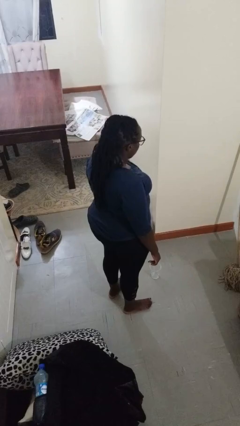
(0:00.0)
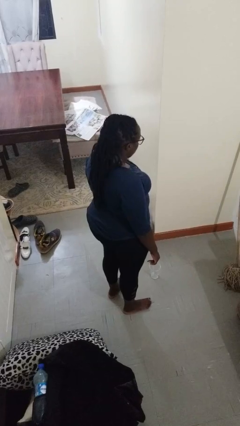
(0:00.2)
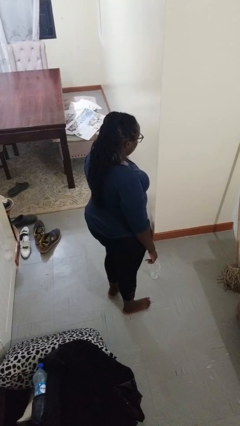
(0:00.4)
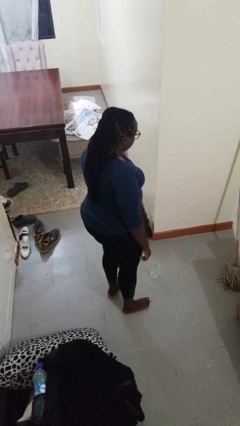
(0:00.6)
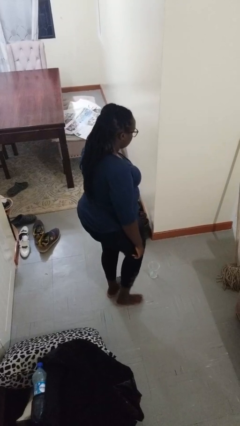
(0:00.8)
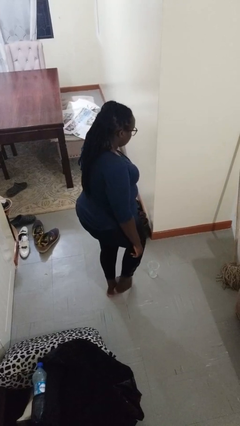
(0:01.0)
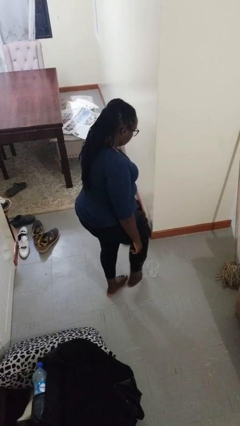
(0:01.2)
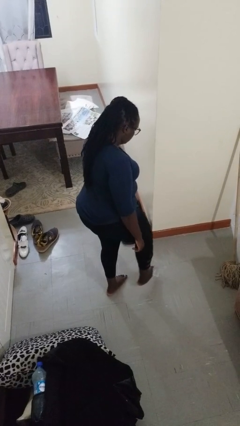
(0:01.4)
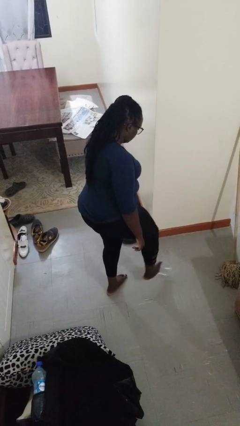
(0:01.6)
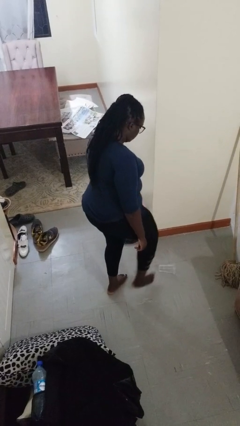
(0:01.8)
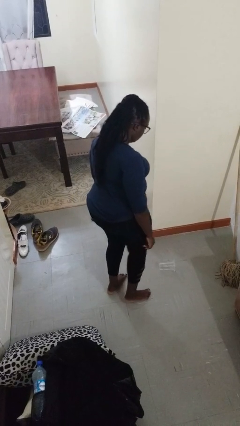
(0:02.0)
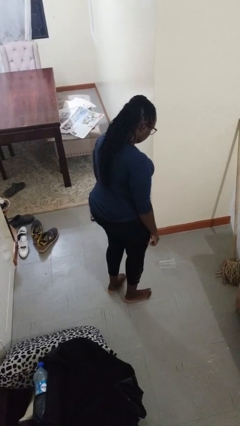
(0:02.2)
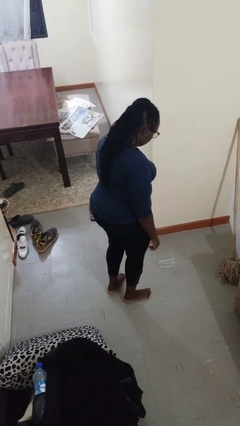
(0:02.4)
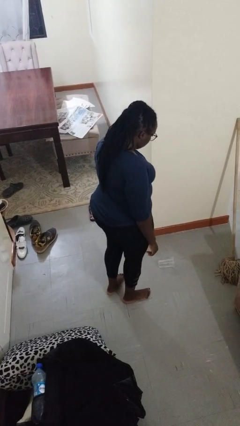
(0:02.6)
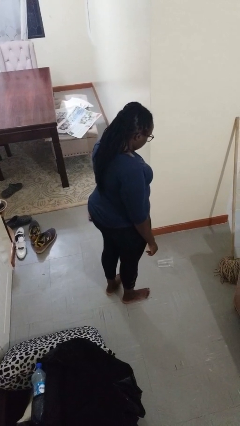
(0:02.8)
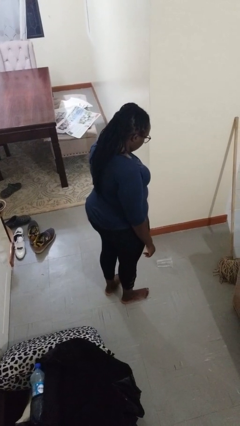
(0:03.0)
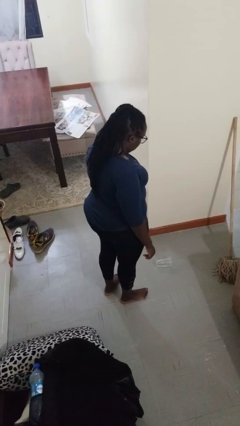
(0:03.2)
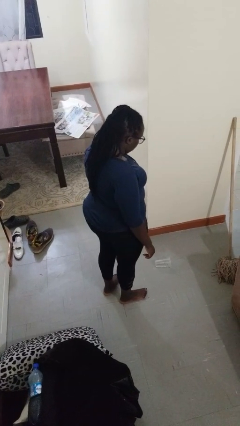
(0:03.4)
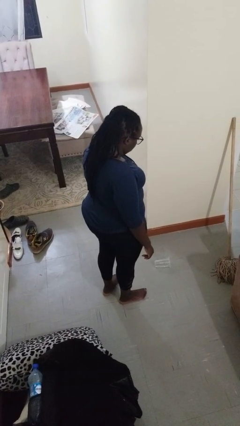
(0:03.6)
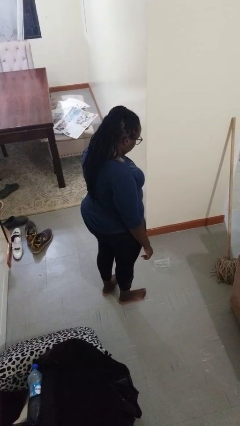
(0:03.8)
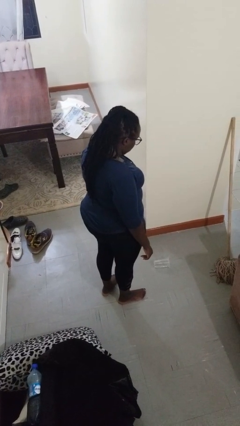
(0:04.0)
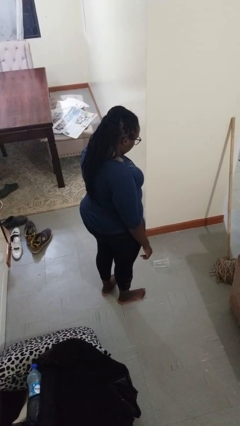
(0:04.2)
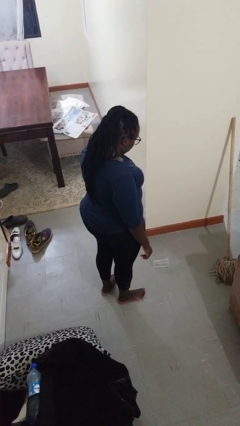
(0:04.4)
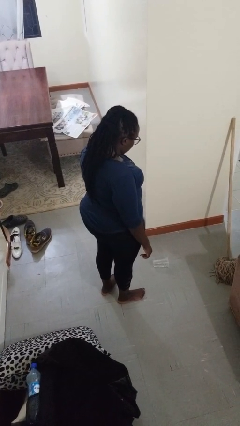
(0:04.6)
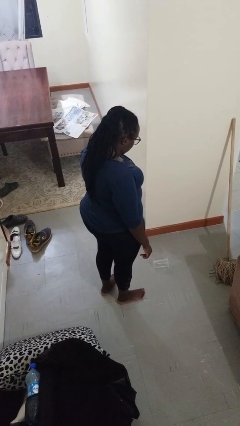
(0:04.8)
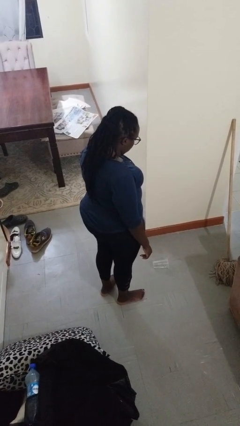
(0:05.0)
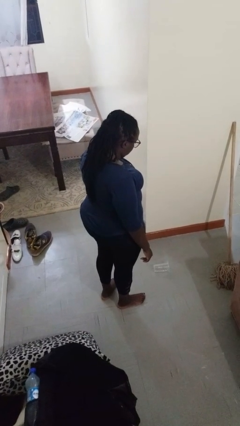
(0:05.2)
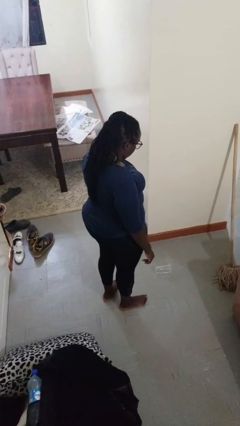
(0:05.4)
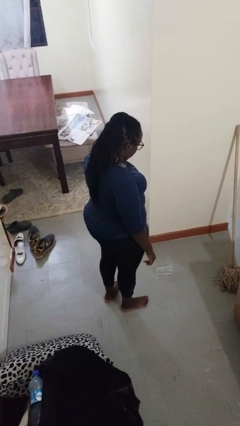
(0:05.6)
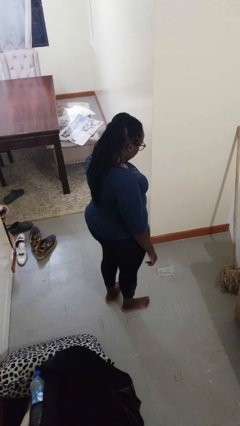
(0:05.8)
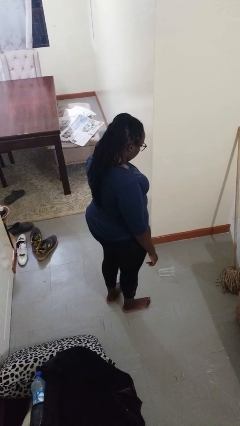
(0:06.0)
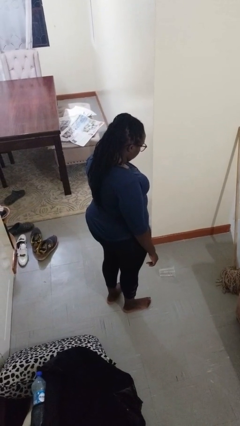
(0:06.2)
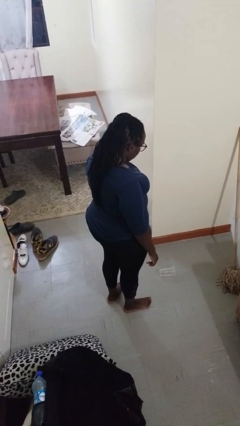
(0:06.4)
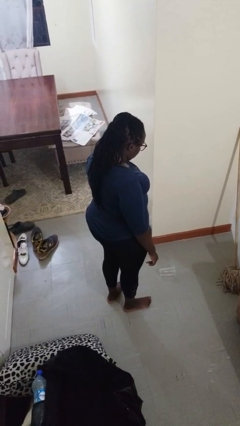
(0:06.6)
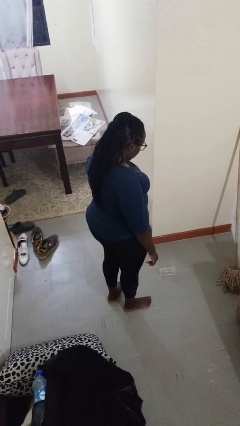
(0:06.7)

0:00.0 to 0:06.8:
person spills on floor

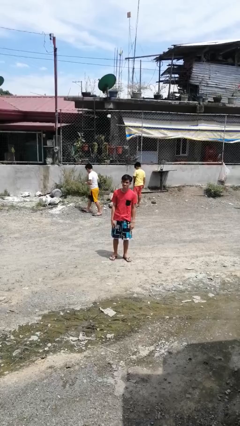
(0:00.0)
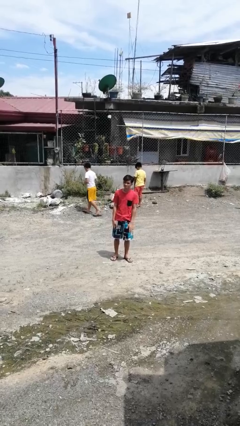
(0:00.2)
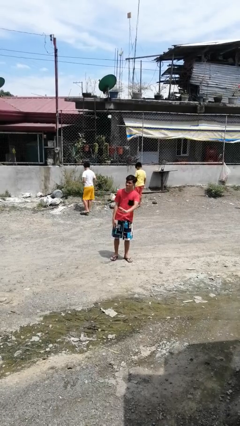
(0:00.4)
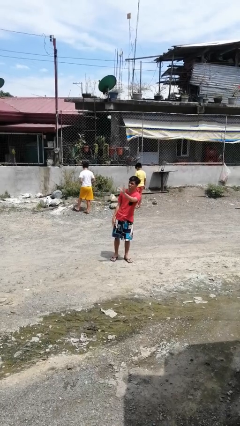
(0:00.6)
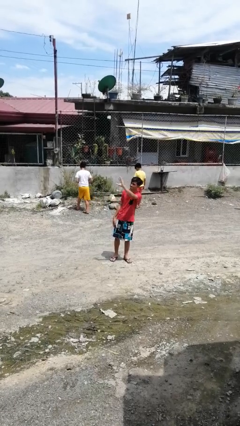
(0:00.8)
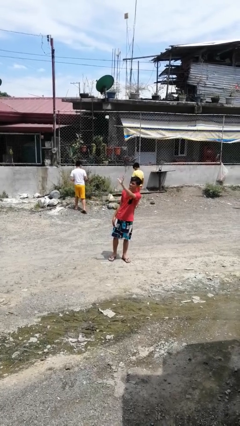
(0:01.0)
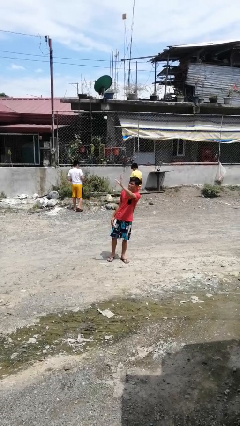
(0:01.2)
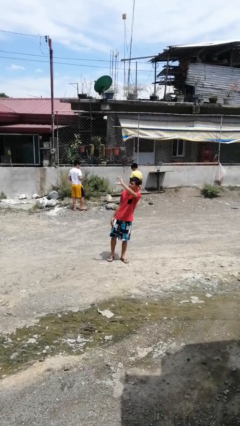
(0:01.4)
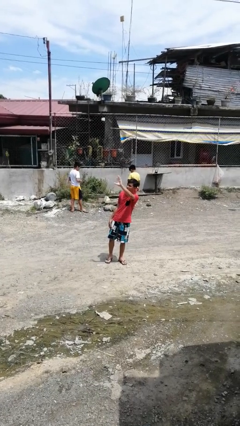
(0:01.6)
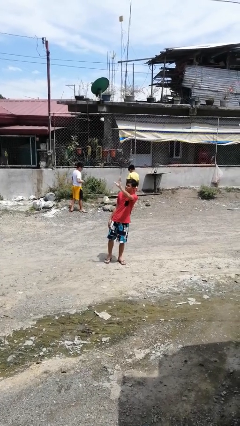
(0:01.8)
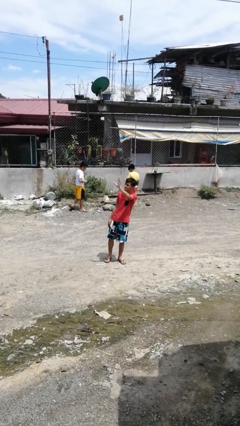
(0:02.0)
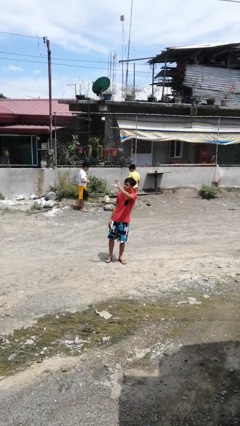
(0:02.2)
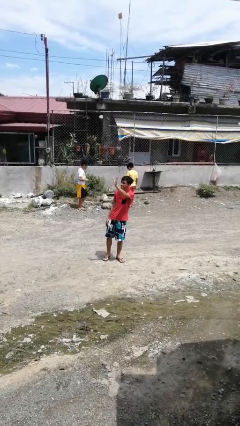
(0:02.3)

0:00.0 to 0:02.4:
person waves at person

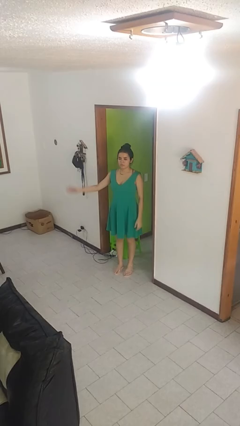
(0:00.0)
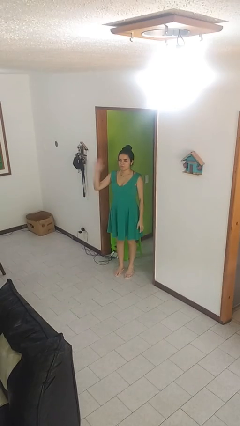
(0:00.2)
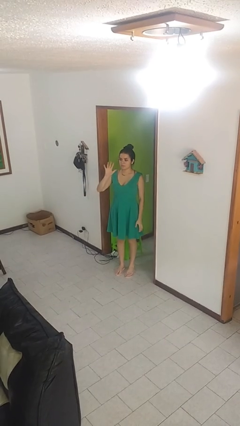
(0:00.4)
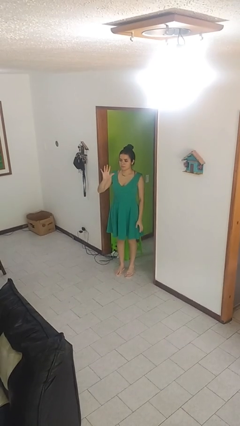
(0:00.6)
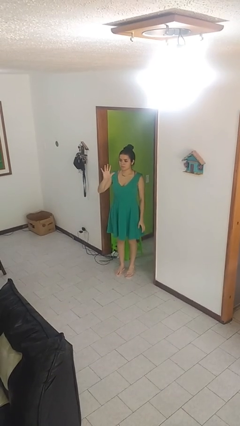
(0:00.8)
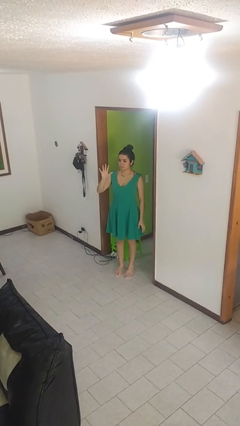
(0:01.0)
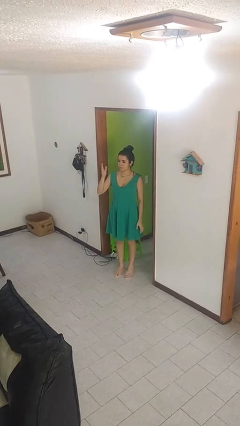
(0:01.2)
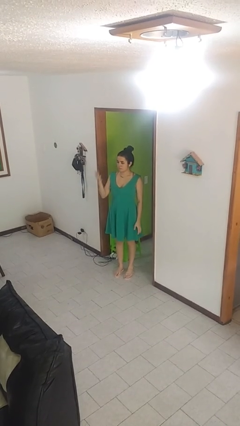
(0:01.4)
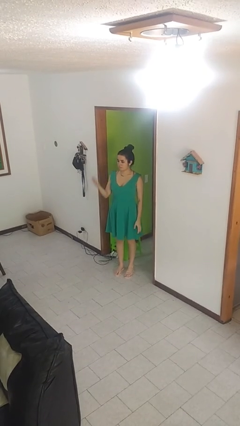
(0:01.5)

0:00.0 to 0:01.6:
person gestures number five

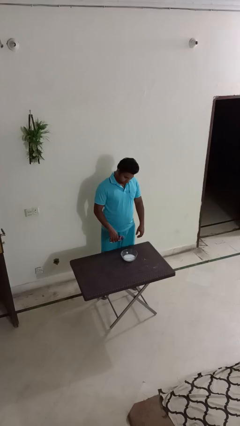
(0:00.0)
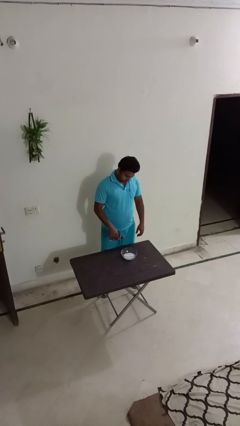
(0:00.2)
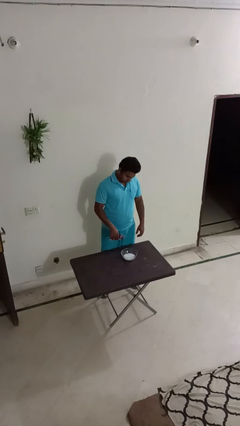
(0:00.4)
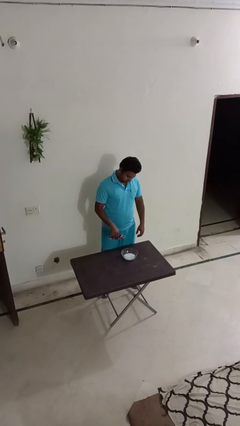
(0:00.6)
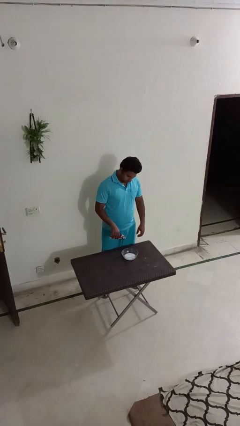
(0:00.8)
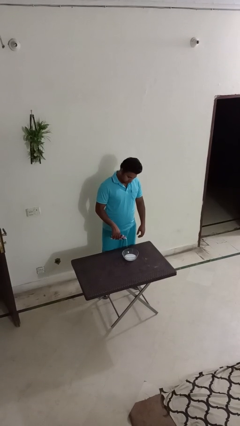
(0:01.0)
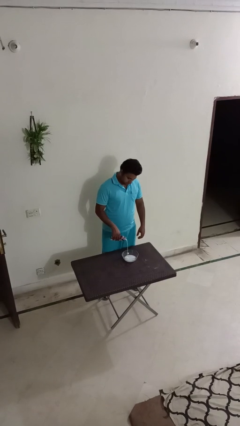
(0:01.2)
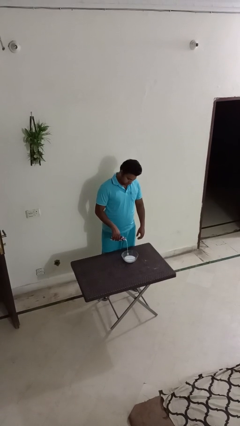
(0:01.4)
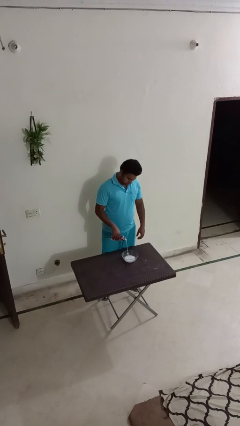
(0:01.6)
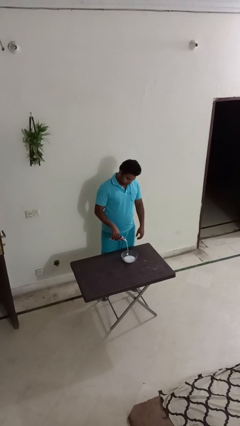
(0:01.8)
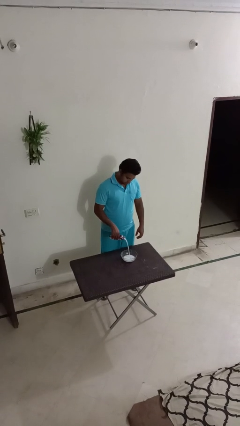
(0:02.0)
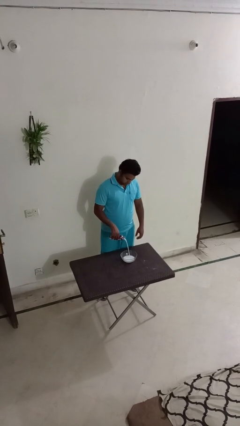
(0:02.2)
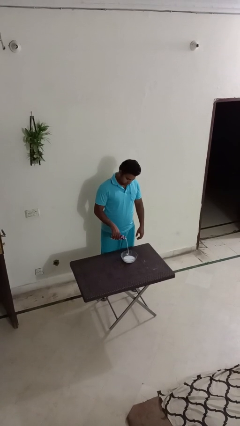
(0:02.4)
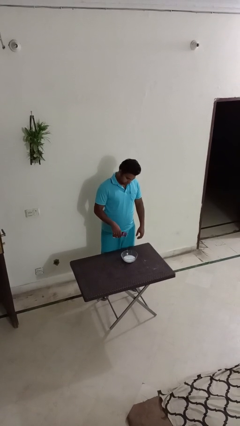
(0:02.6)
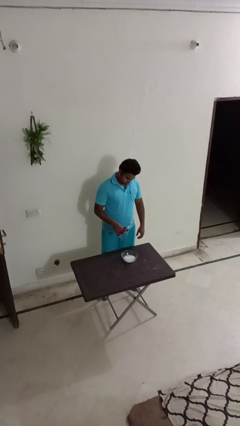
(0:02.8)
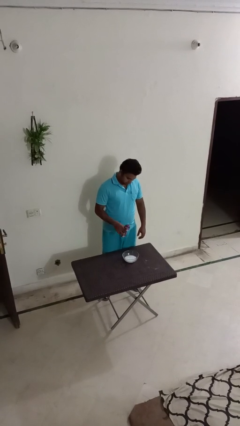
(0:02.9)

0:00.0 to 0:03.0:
person pours into bowl

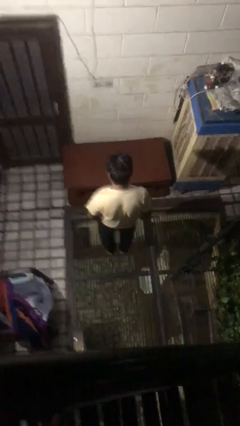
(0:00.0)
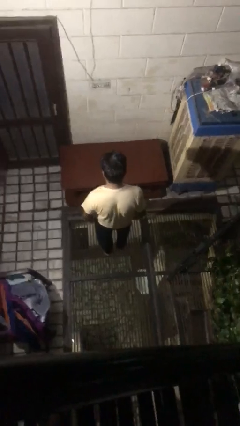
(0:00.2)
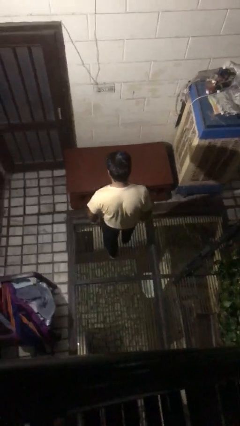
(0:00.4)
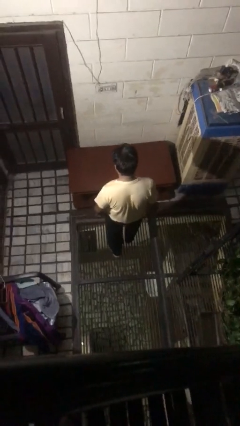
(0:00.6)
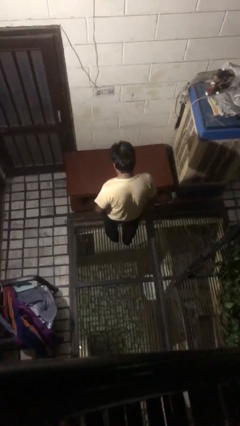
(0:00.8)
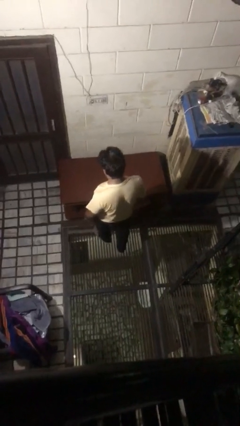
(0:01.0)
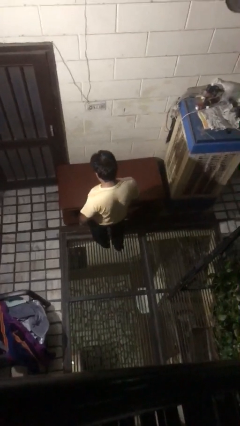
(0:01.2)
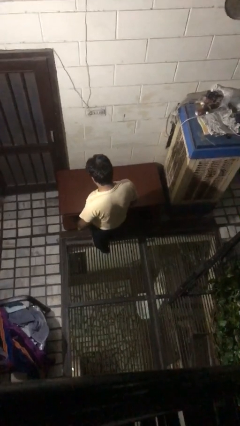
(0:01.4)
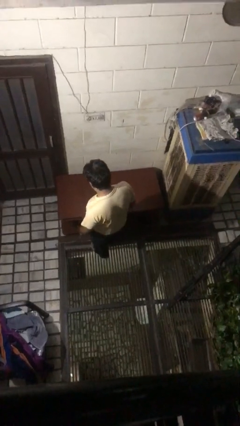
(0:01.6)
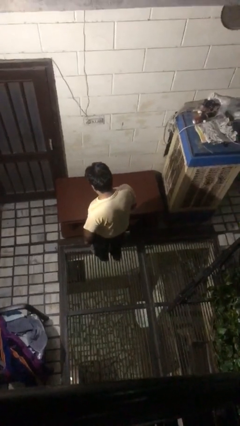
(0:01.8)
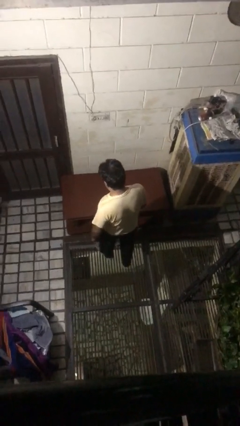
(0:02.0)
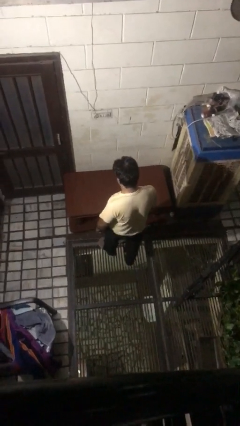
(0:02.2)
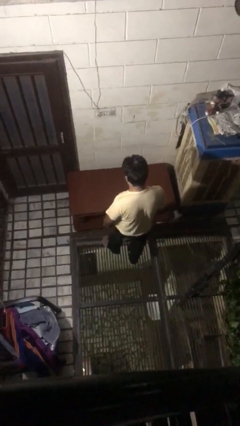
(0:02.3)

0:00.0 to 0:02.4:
person bumps into table

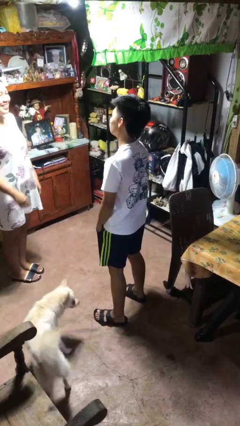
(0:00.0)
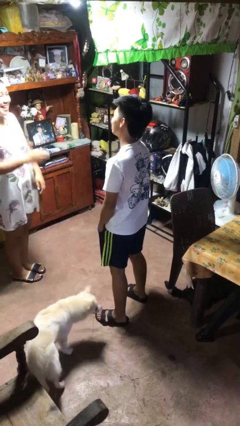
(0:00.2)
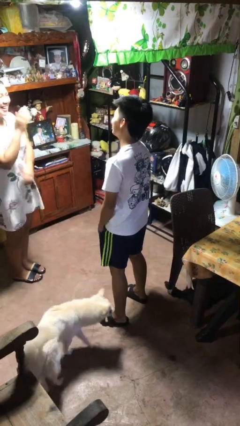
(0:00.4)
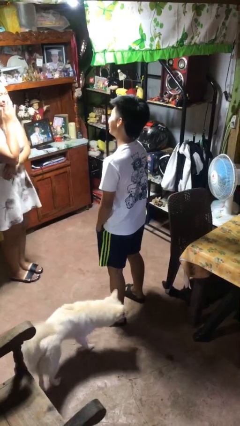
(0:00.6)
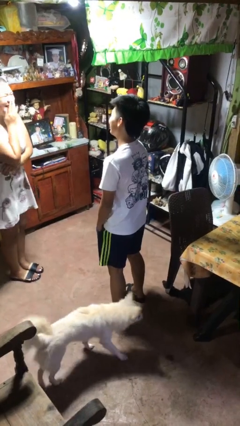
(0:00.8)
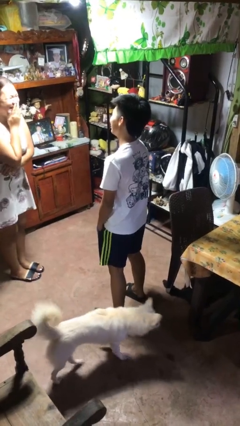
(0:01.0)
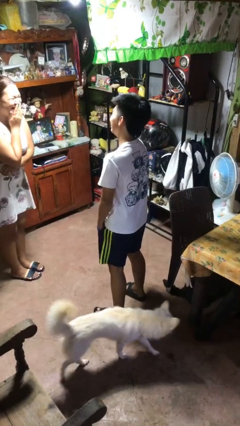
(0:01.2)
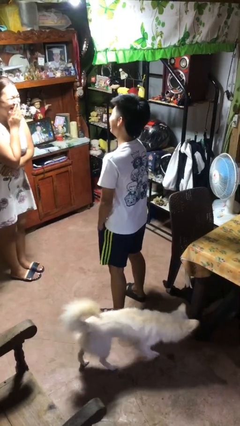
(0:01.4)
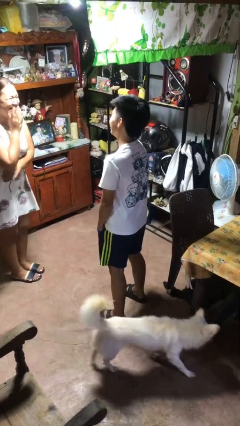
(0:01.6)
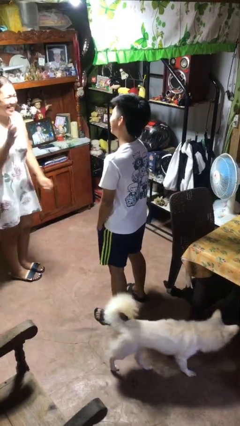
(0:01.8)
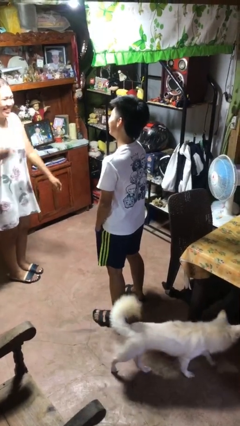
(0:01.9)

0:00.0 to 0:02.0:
person laughs with person
